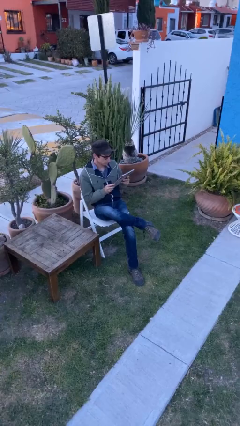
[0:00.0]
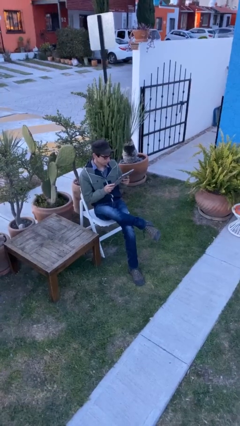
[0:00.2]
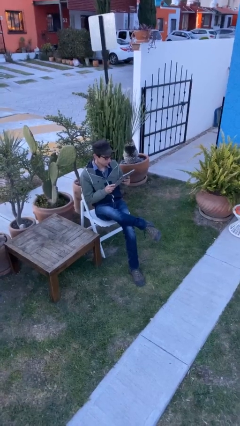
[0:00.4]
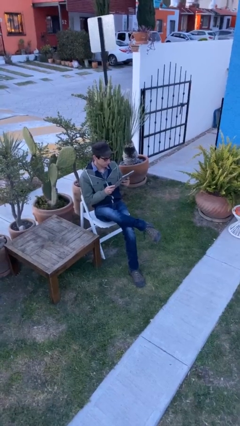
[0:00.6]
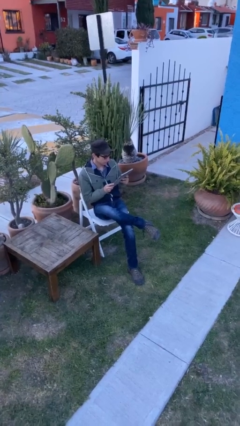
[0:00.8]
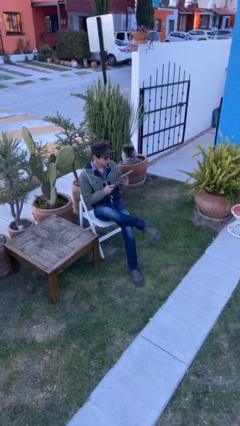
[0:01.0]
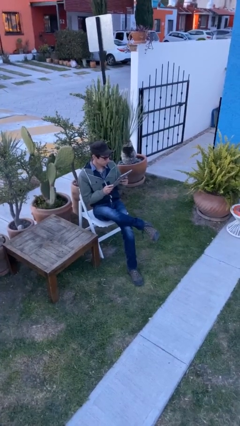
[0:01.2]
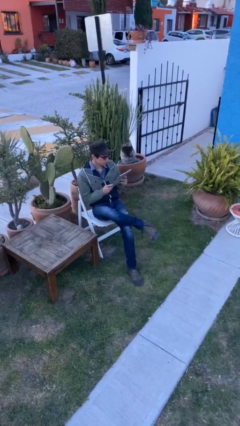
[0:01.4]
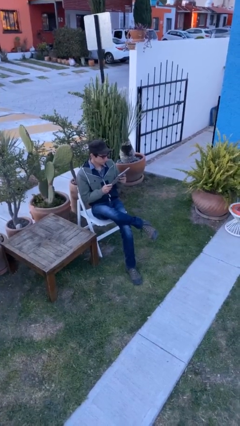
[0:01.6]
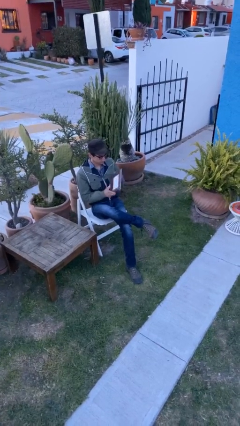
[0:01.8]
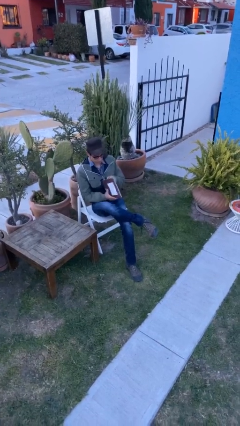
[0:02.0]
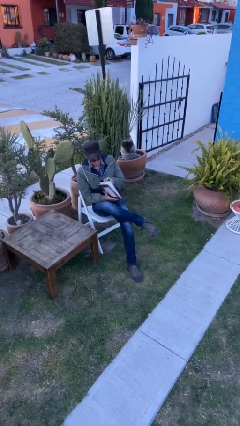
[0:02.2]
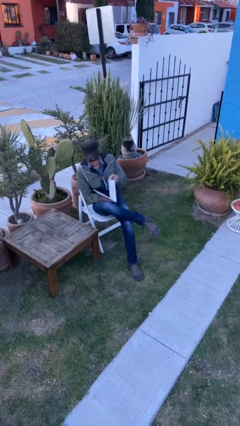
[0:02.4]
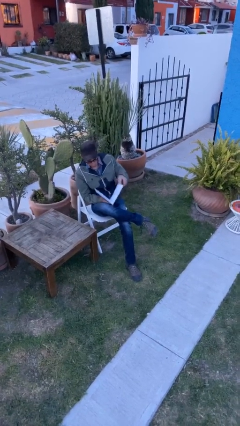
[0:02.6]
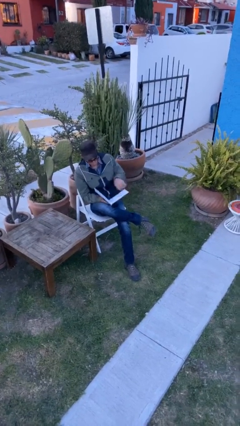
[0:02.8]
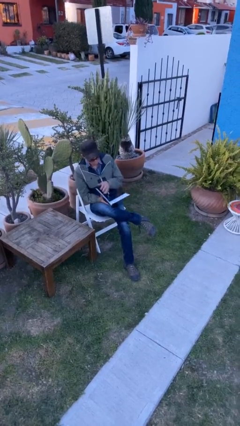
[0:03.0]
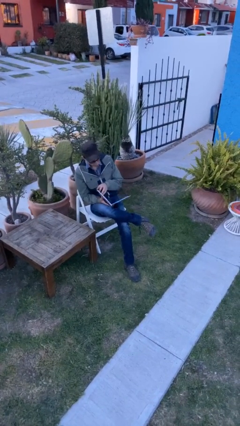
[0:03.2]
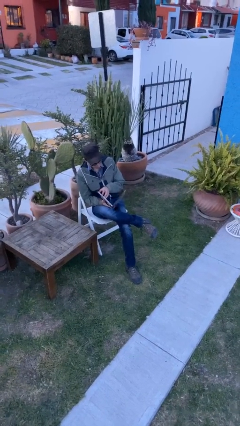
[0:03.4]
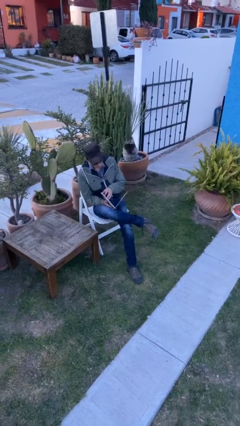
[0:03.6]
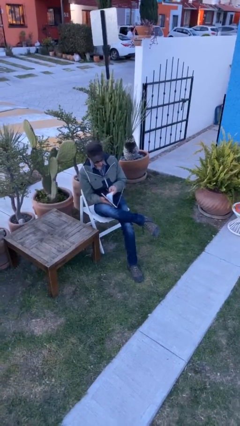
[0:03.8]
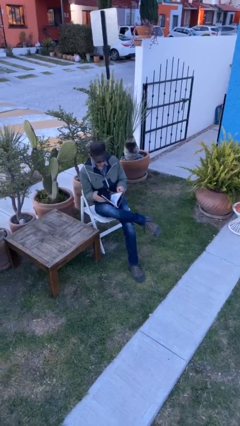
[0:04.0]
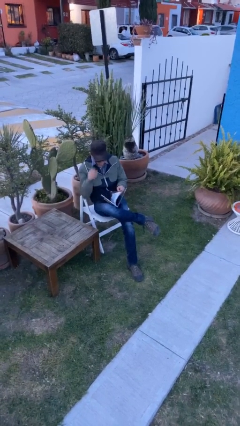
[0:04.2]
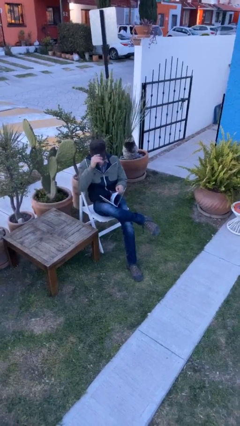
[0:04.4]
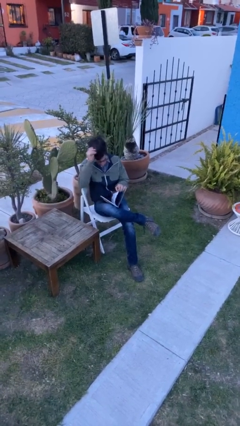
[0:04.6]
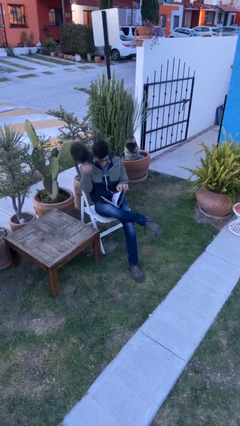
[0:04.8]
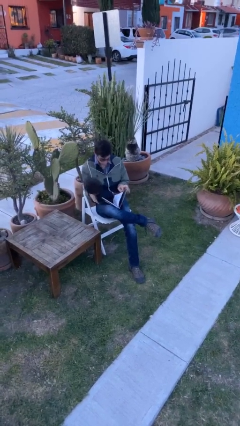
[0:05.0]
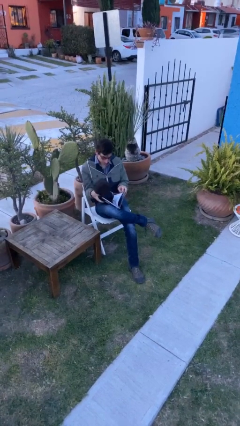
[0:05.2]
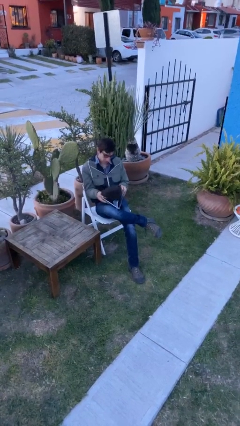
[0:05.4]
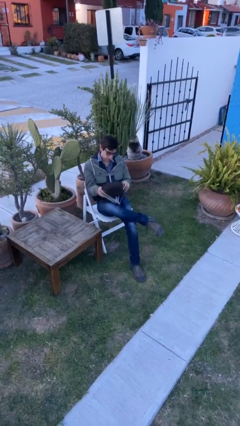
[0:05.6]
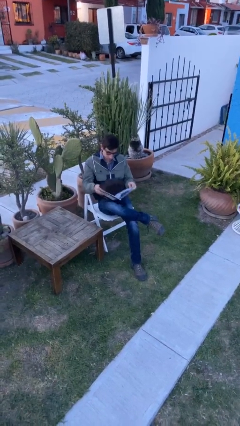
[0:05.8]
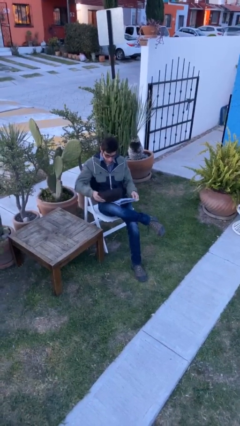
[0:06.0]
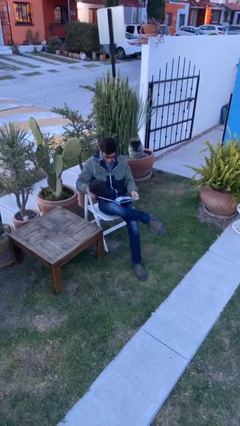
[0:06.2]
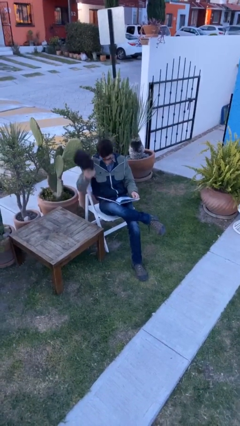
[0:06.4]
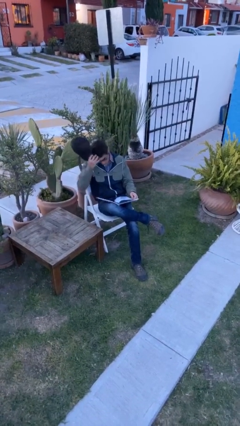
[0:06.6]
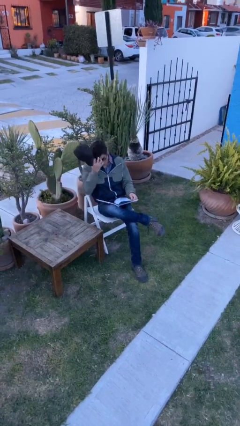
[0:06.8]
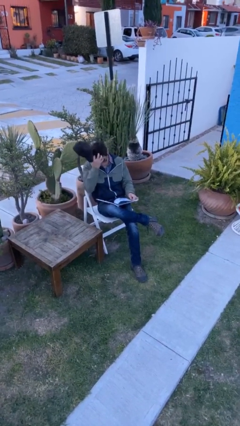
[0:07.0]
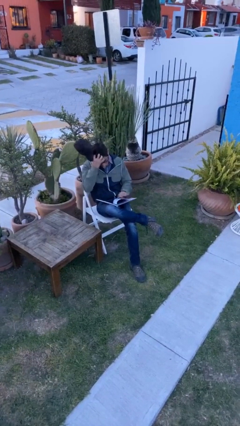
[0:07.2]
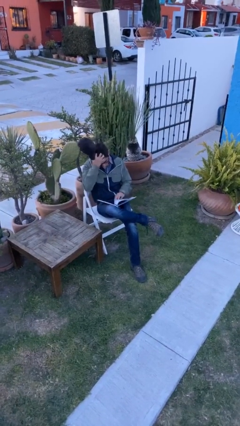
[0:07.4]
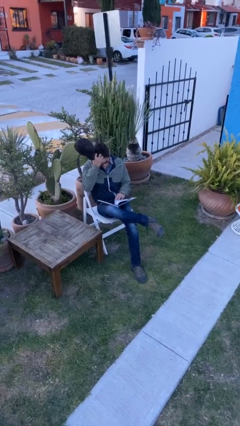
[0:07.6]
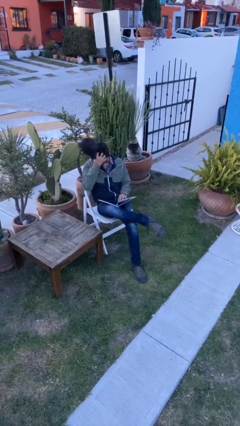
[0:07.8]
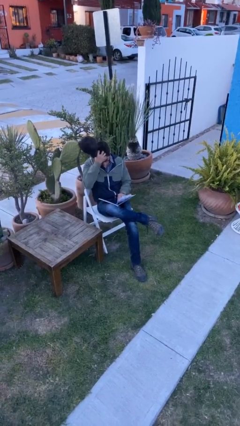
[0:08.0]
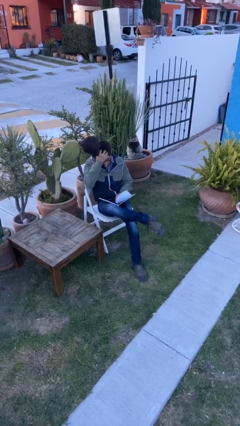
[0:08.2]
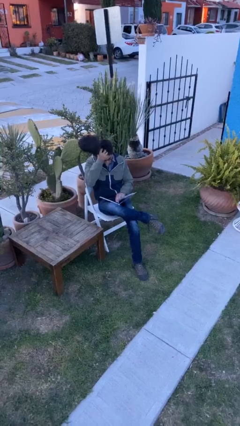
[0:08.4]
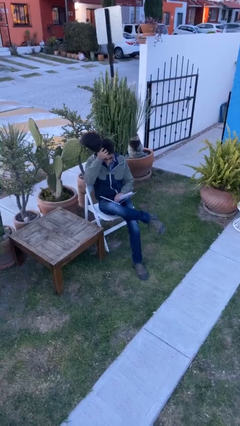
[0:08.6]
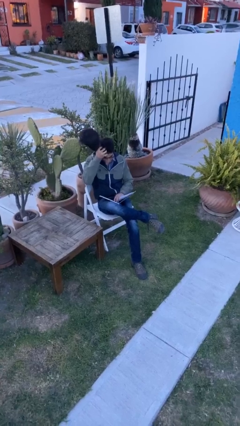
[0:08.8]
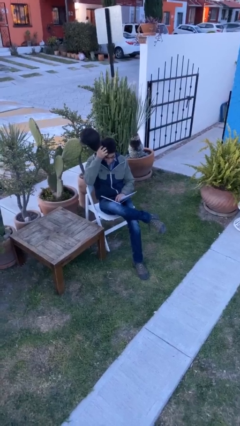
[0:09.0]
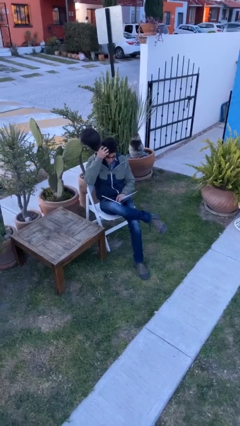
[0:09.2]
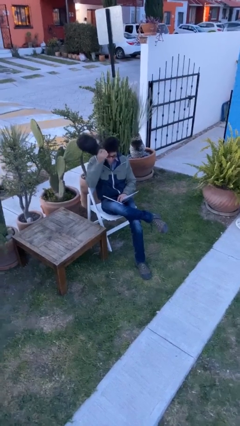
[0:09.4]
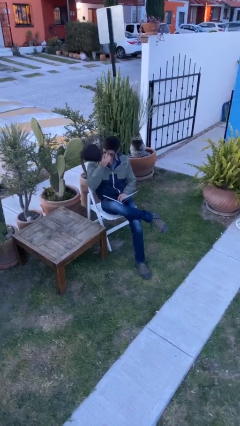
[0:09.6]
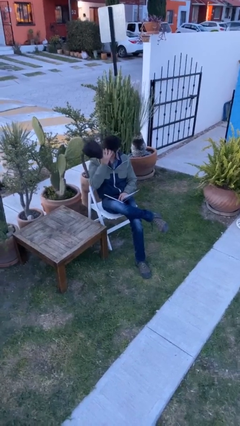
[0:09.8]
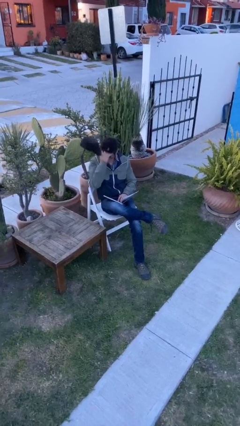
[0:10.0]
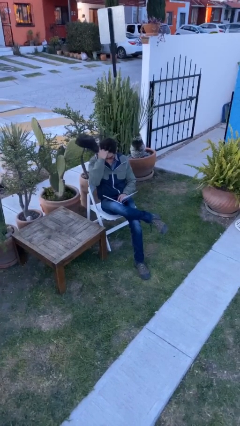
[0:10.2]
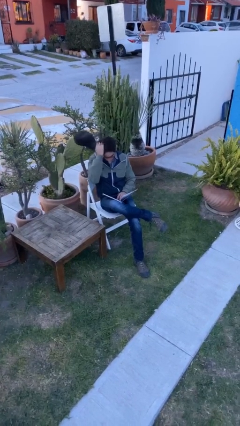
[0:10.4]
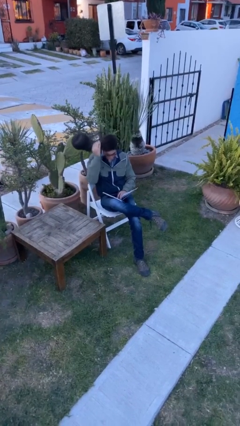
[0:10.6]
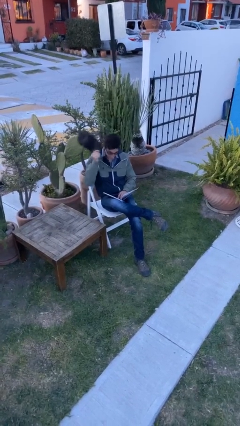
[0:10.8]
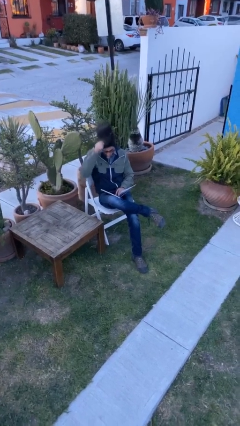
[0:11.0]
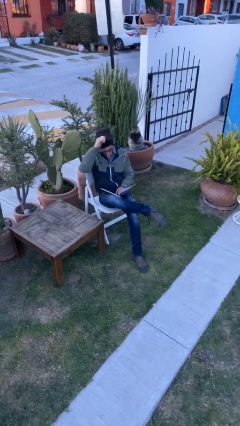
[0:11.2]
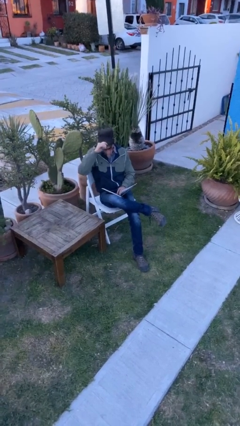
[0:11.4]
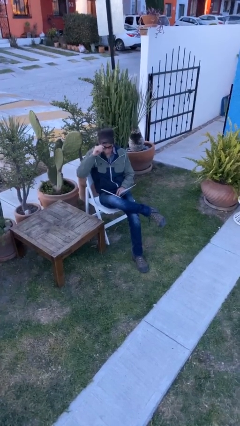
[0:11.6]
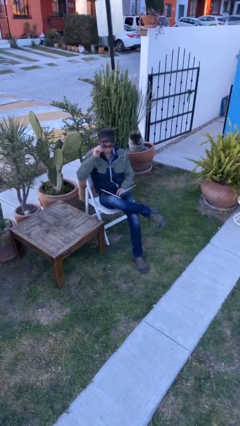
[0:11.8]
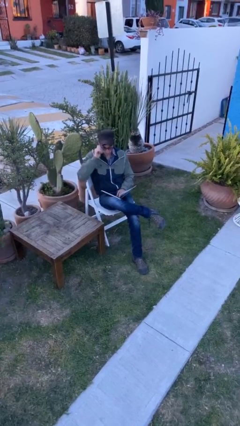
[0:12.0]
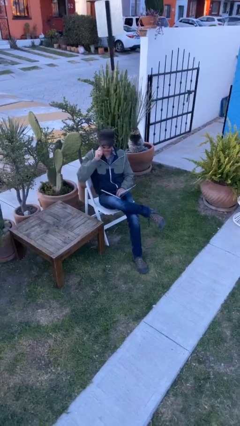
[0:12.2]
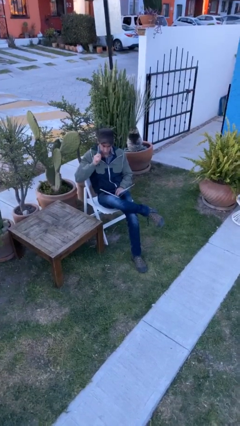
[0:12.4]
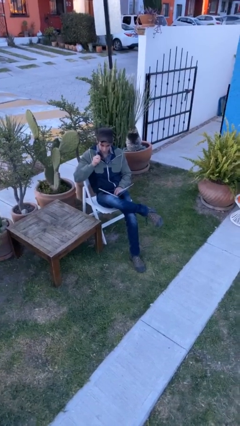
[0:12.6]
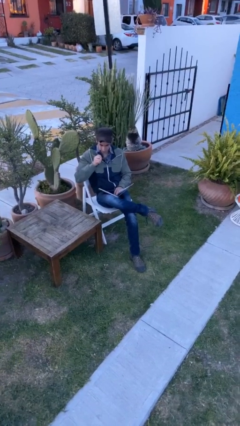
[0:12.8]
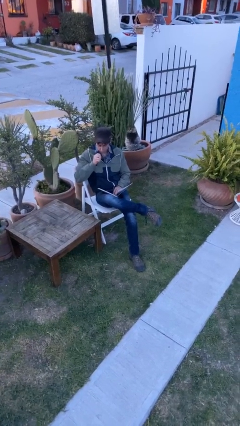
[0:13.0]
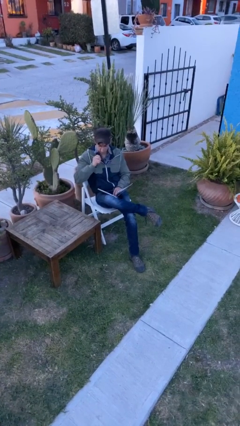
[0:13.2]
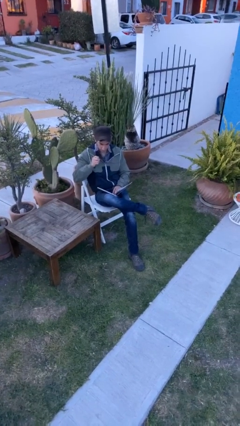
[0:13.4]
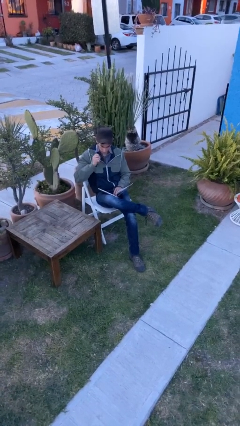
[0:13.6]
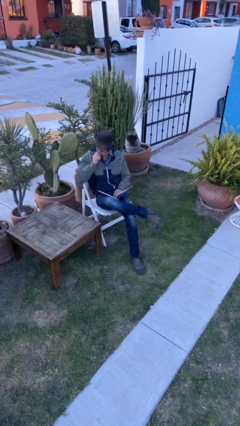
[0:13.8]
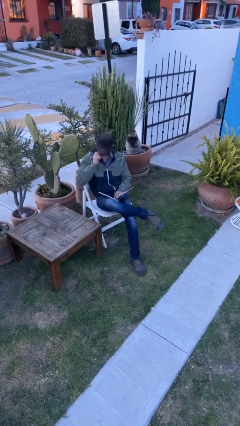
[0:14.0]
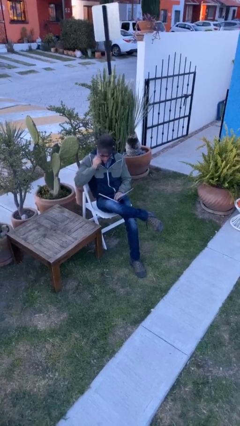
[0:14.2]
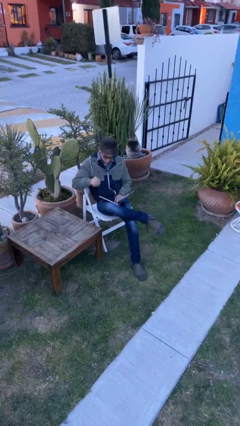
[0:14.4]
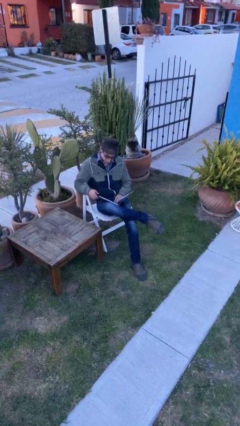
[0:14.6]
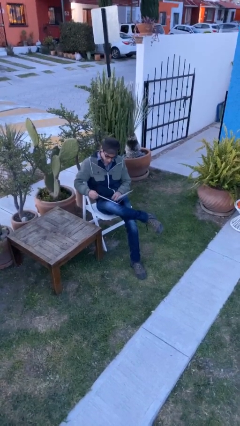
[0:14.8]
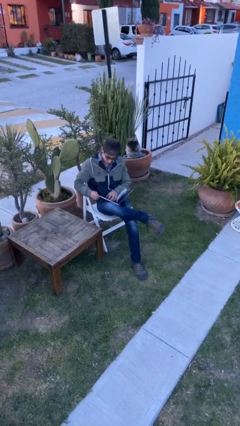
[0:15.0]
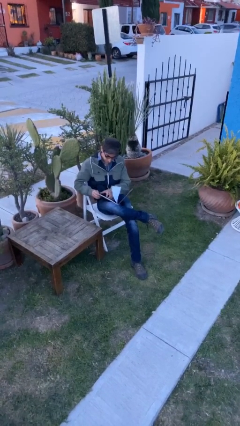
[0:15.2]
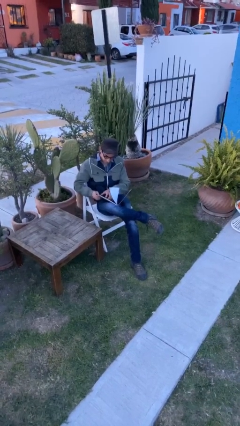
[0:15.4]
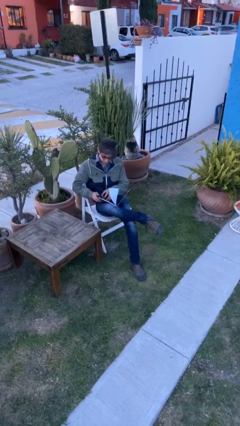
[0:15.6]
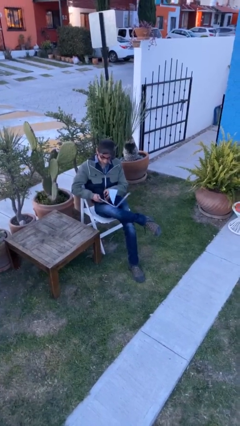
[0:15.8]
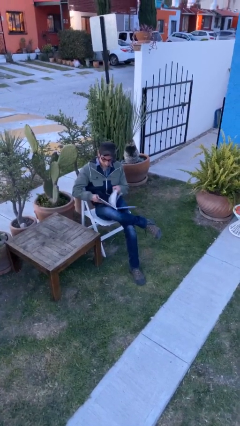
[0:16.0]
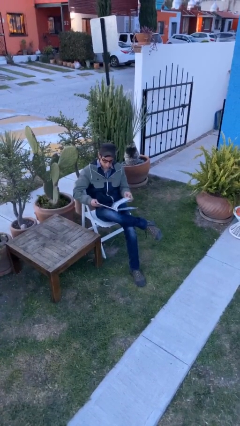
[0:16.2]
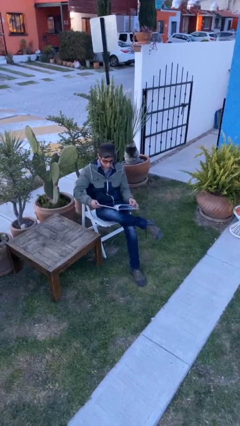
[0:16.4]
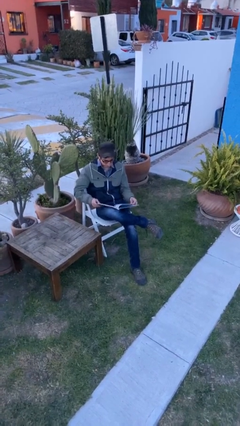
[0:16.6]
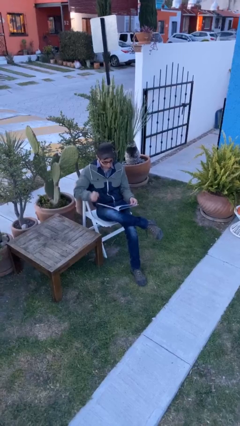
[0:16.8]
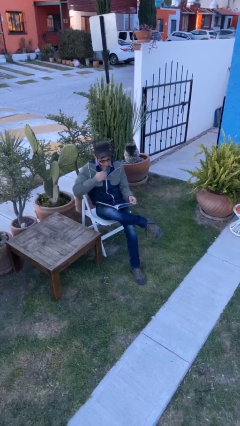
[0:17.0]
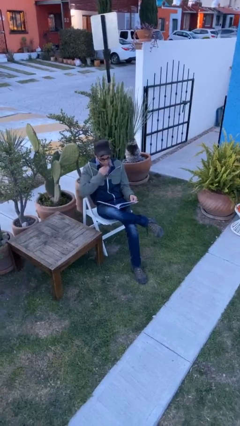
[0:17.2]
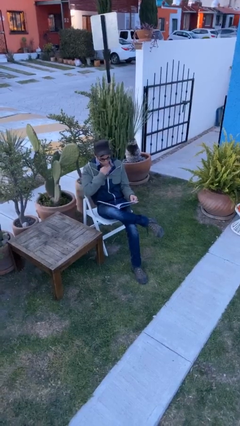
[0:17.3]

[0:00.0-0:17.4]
person reads document

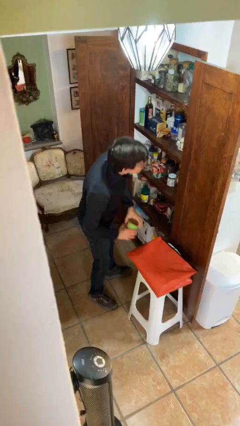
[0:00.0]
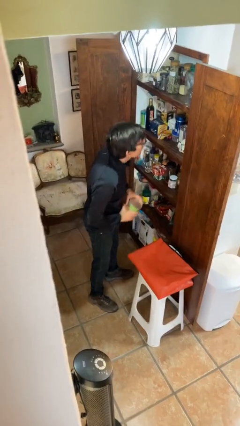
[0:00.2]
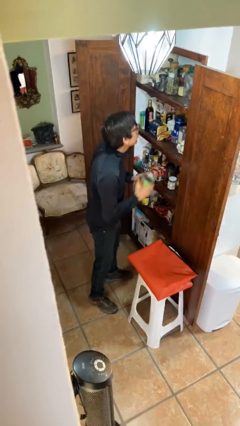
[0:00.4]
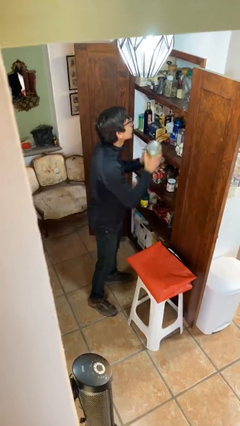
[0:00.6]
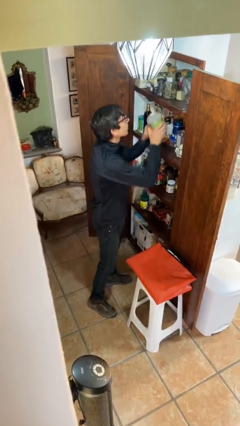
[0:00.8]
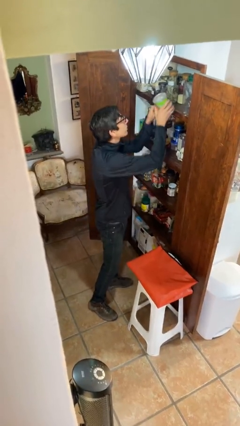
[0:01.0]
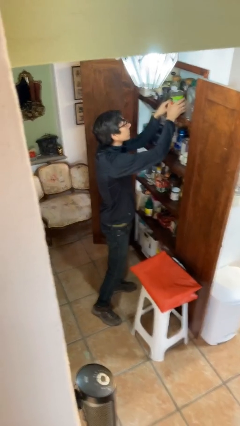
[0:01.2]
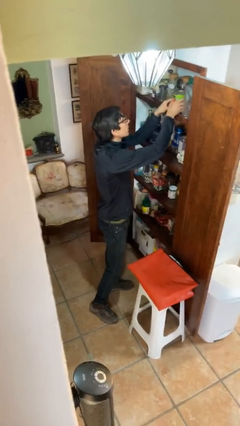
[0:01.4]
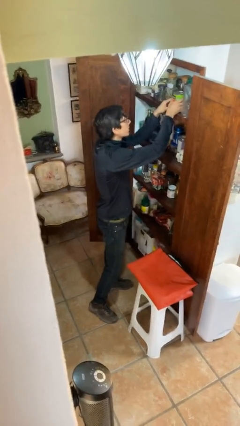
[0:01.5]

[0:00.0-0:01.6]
person picks up object from table
